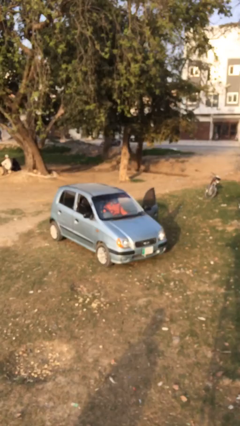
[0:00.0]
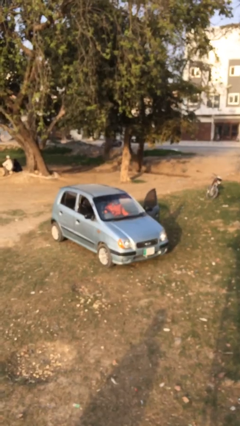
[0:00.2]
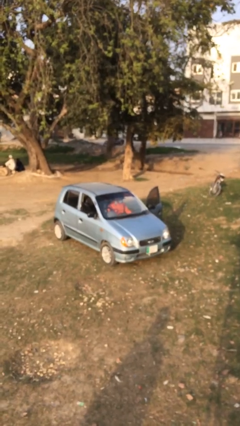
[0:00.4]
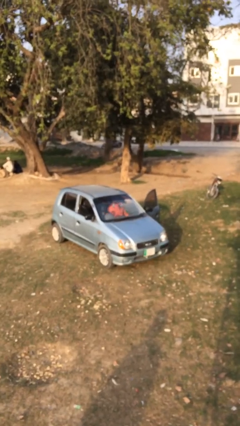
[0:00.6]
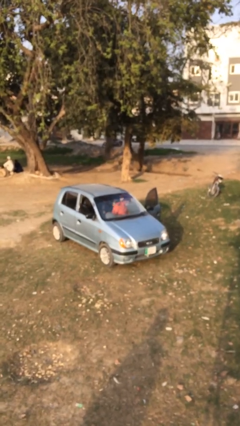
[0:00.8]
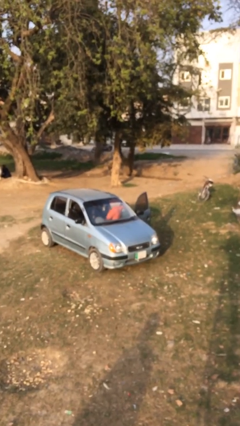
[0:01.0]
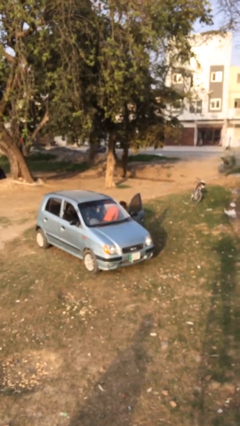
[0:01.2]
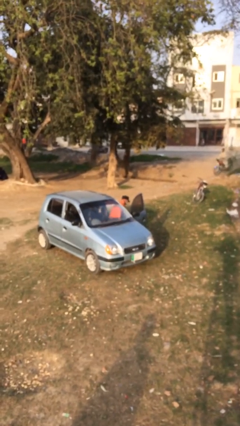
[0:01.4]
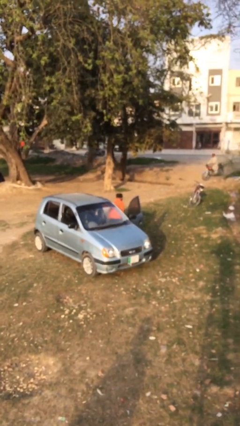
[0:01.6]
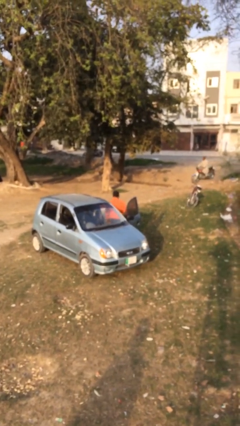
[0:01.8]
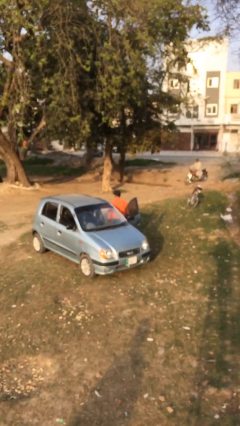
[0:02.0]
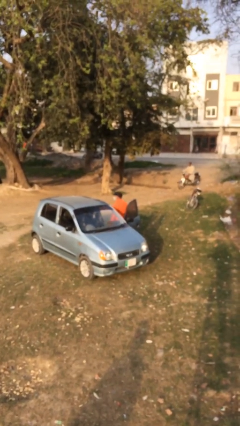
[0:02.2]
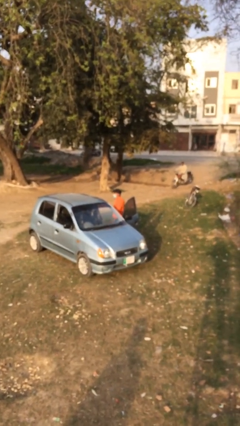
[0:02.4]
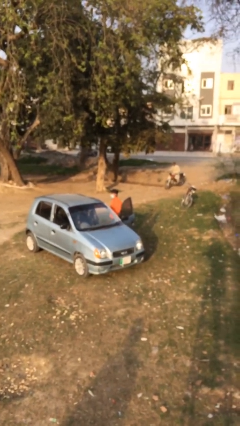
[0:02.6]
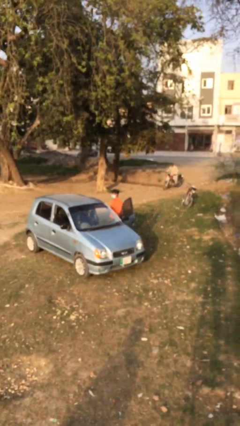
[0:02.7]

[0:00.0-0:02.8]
person exits car

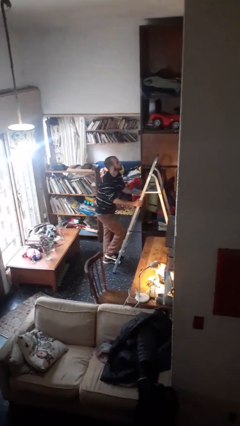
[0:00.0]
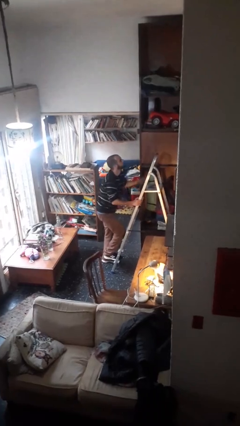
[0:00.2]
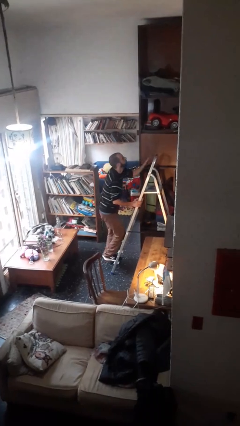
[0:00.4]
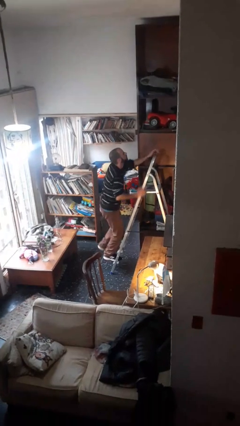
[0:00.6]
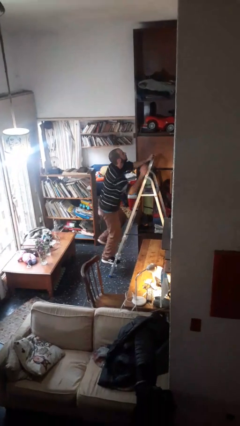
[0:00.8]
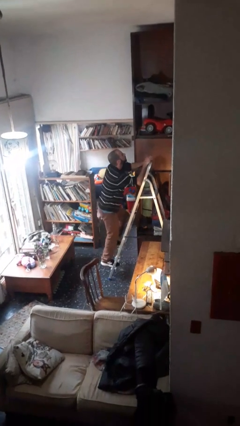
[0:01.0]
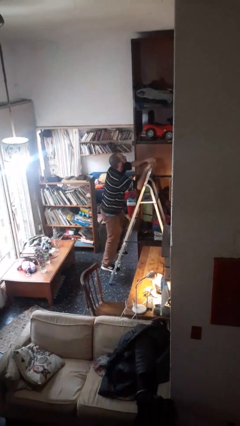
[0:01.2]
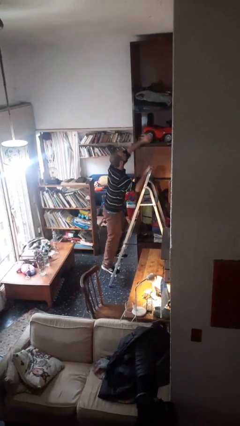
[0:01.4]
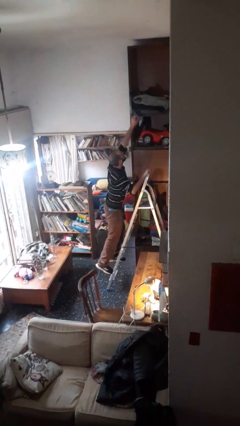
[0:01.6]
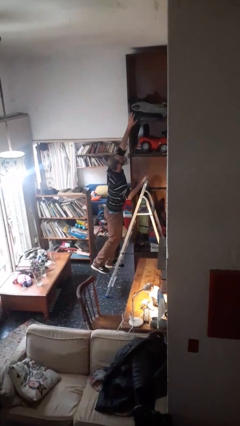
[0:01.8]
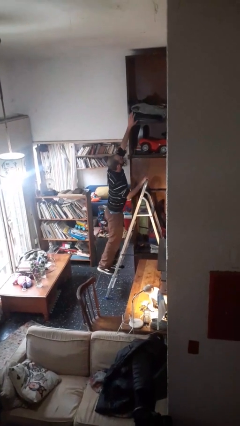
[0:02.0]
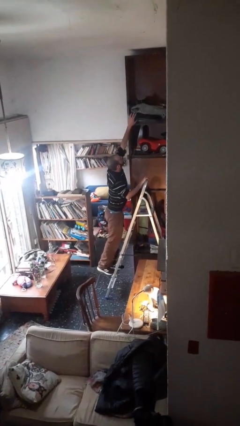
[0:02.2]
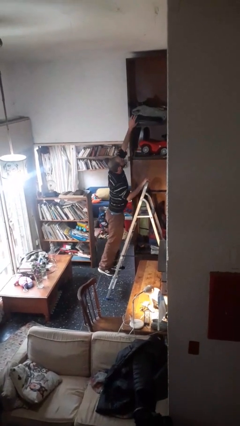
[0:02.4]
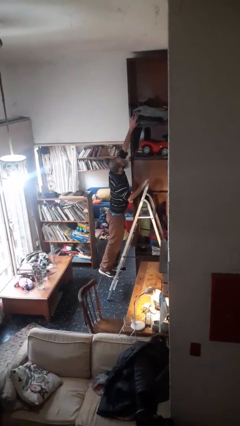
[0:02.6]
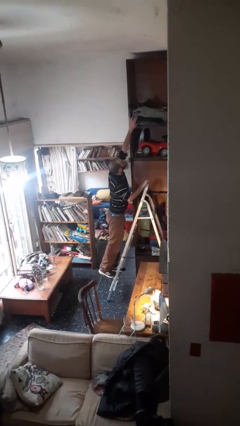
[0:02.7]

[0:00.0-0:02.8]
person climbs up ladder

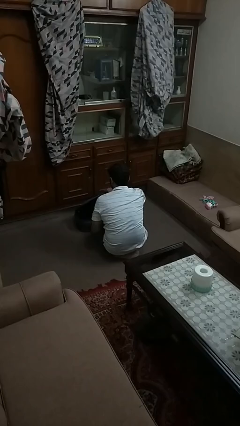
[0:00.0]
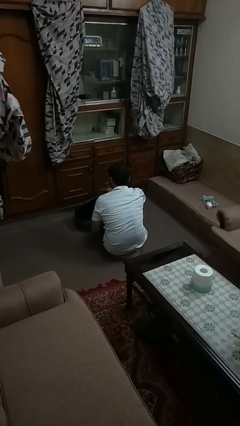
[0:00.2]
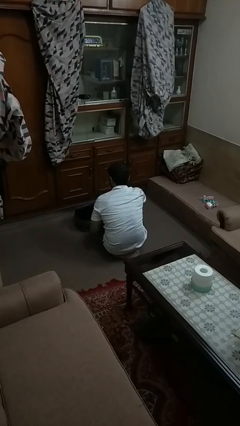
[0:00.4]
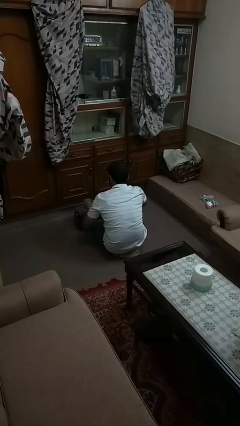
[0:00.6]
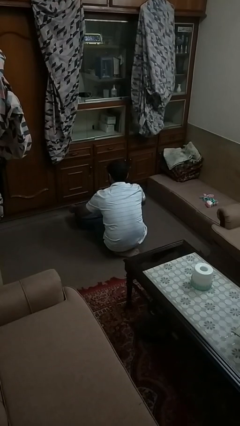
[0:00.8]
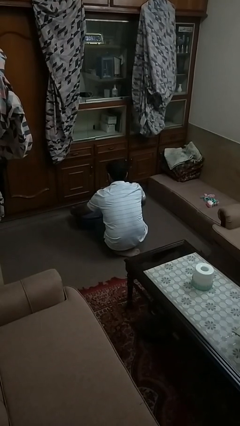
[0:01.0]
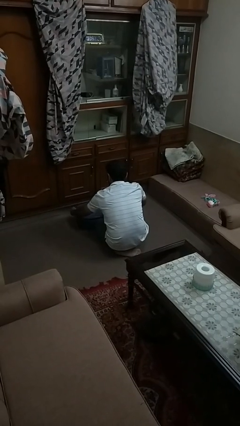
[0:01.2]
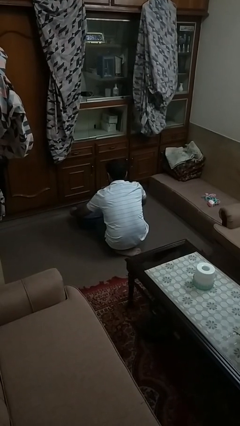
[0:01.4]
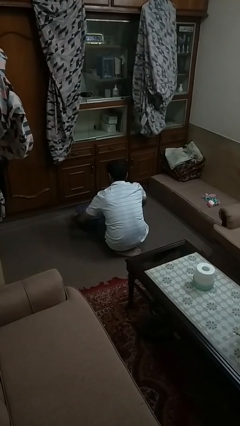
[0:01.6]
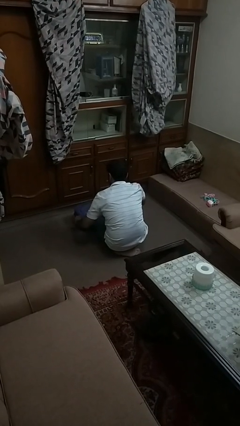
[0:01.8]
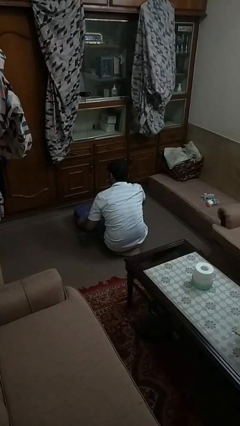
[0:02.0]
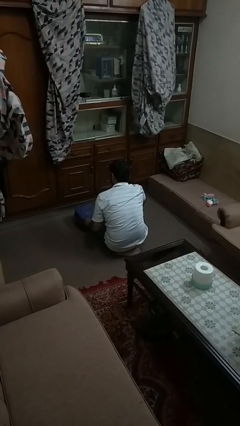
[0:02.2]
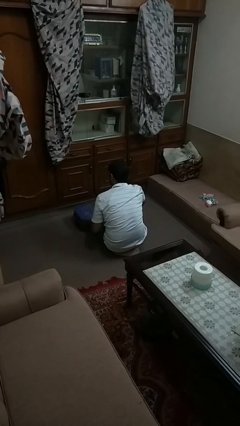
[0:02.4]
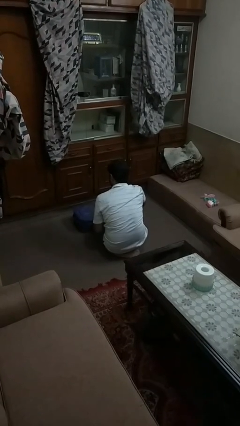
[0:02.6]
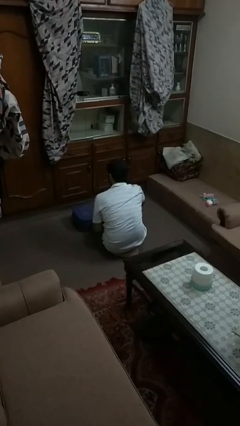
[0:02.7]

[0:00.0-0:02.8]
person closes suitcase

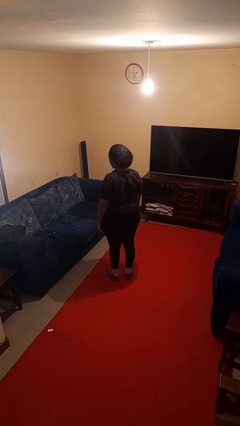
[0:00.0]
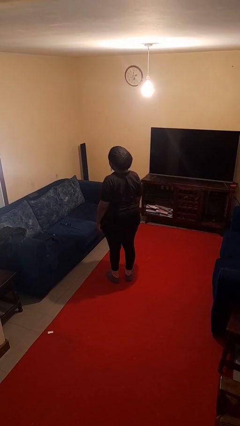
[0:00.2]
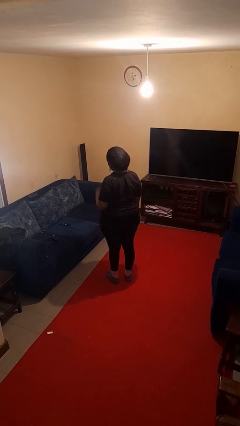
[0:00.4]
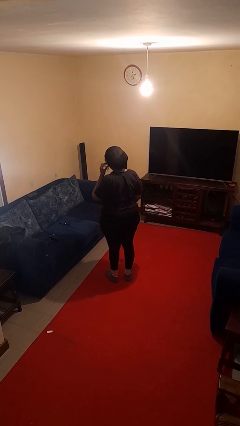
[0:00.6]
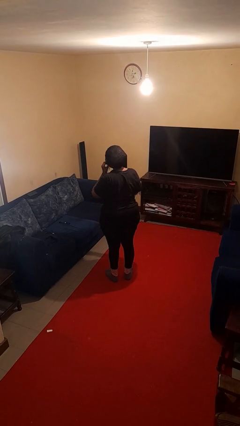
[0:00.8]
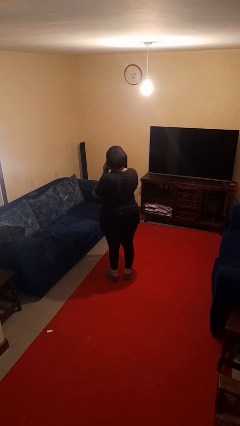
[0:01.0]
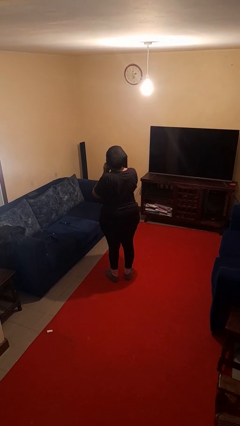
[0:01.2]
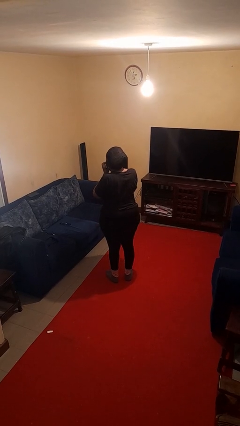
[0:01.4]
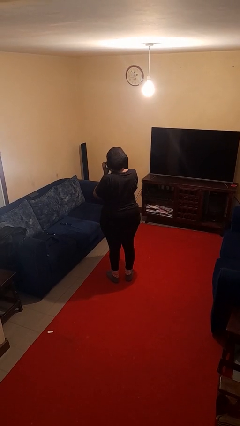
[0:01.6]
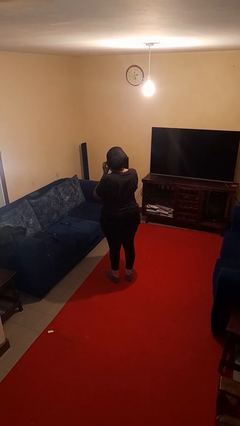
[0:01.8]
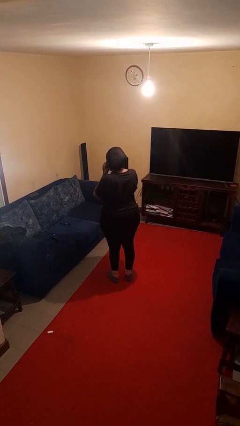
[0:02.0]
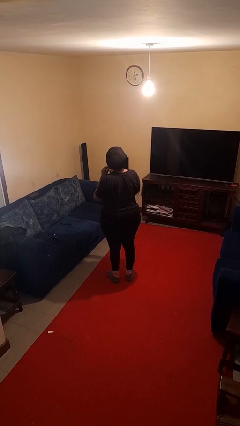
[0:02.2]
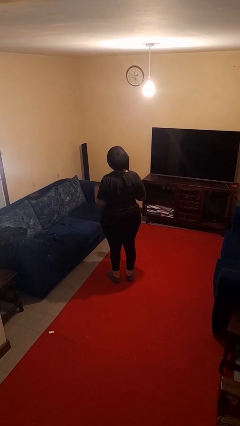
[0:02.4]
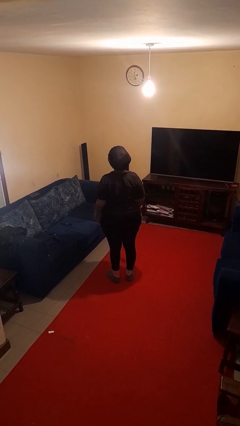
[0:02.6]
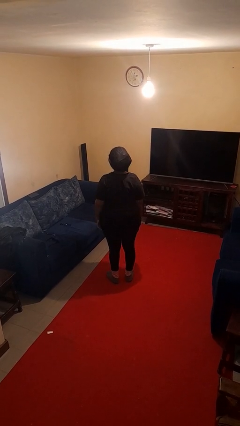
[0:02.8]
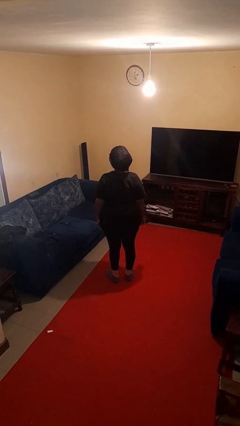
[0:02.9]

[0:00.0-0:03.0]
person takes off earrings

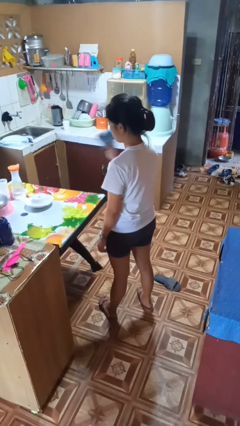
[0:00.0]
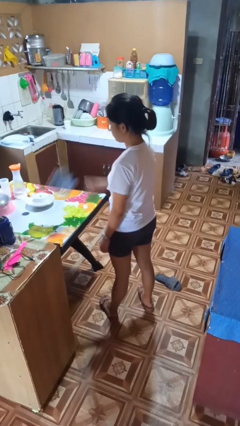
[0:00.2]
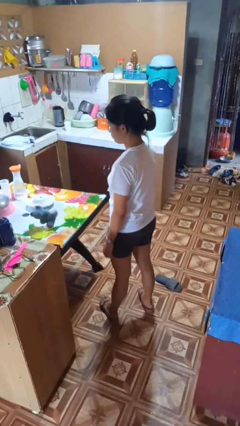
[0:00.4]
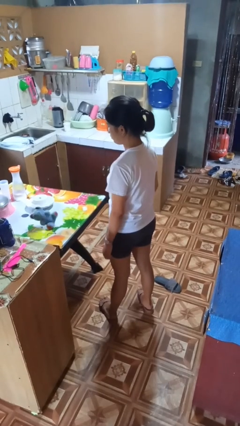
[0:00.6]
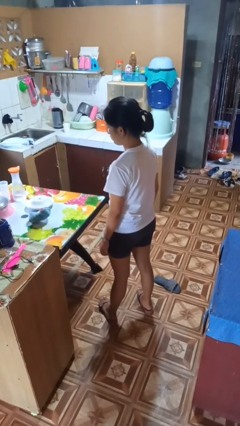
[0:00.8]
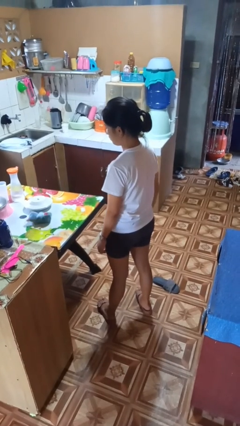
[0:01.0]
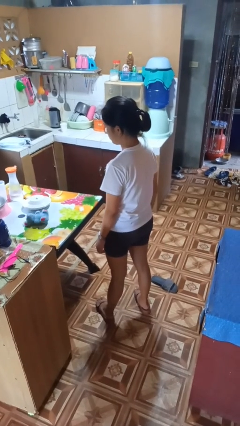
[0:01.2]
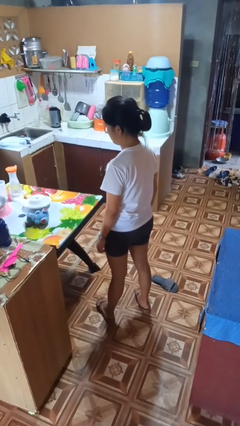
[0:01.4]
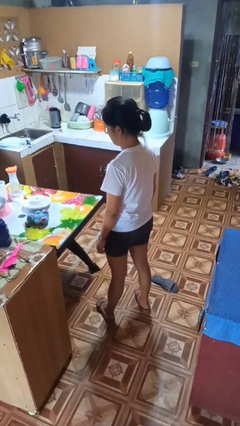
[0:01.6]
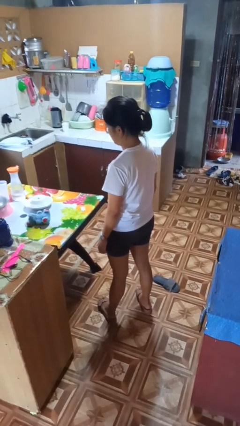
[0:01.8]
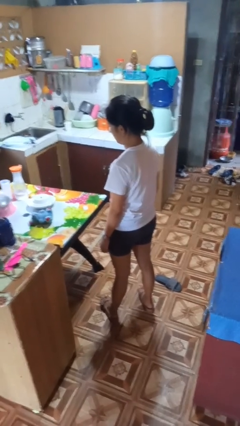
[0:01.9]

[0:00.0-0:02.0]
person throws object on table

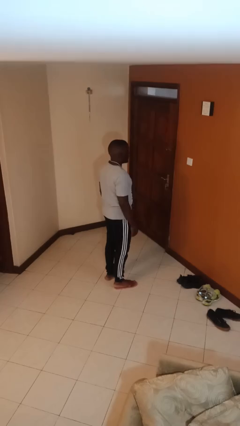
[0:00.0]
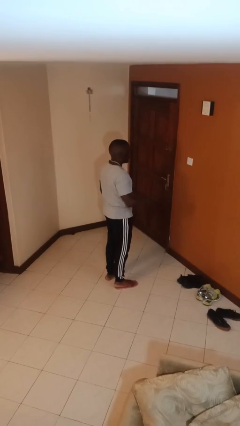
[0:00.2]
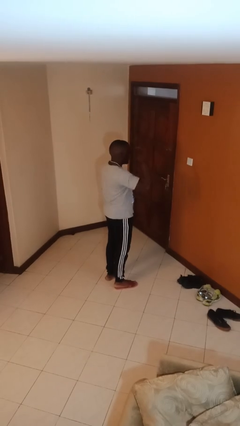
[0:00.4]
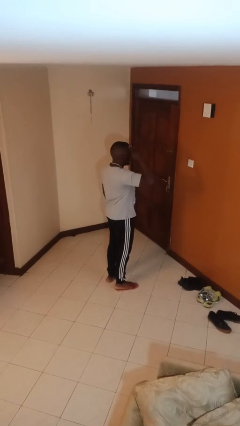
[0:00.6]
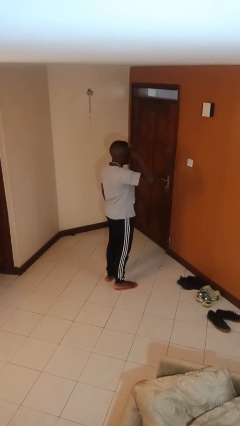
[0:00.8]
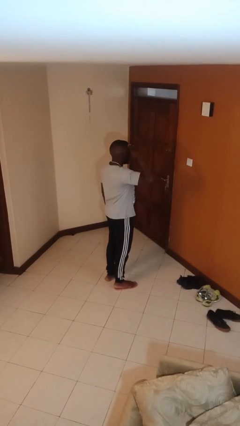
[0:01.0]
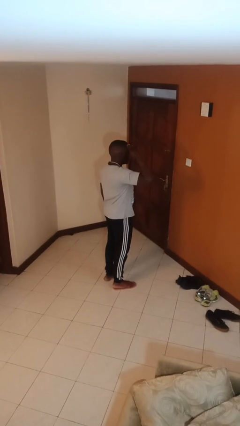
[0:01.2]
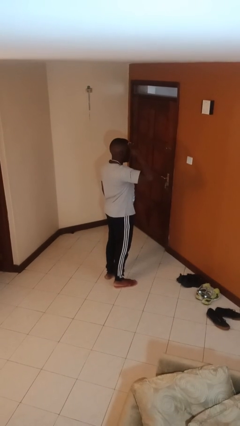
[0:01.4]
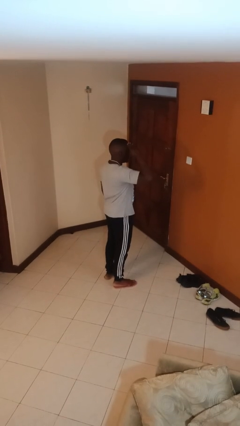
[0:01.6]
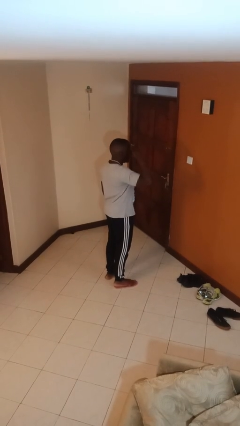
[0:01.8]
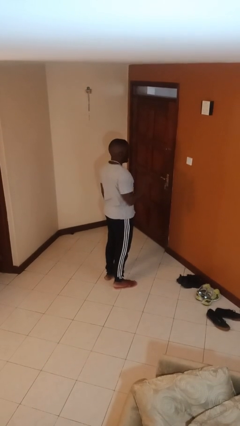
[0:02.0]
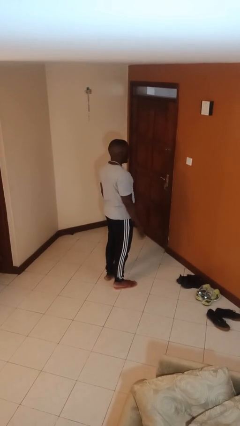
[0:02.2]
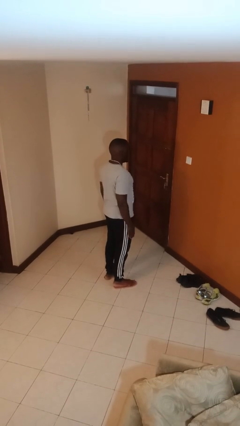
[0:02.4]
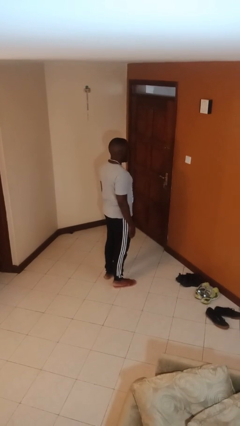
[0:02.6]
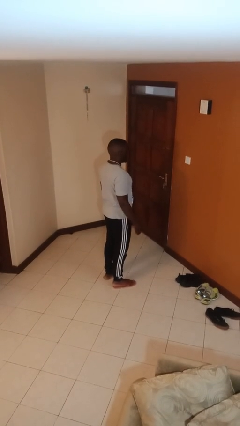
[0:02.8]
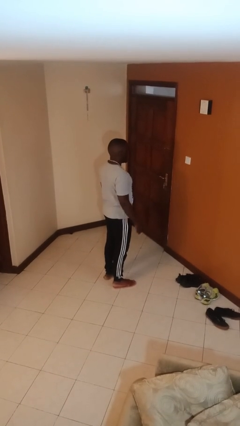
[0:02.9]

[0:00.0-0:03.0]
person salutes

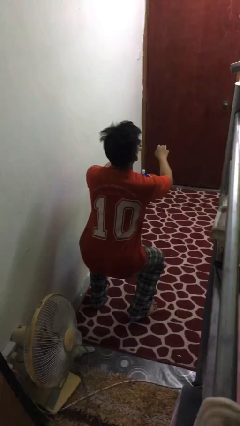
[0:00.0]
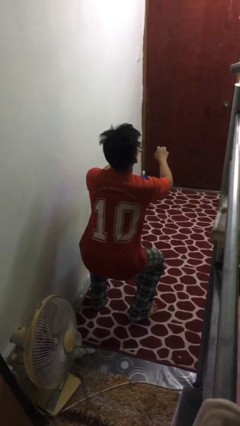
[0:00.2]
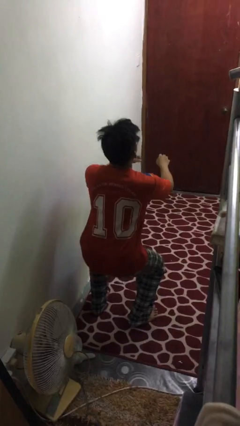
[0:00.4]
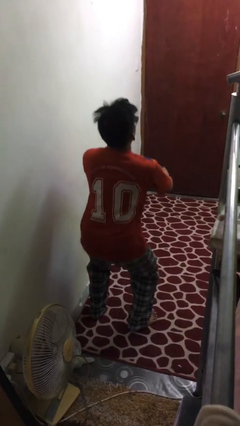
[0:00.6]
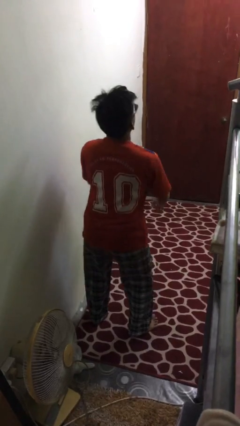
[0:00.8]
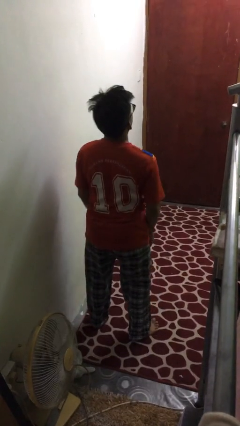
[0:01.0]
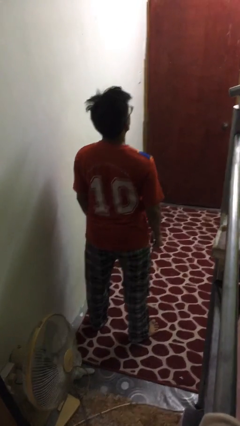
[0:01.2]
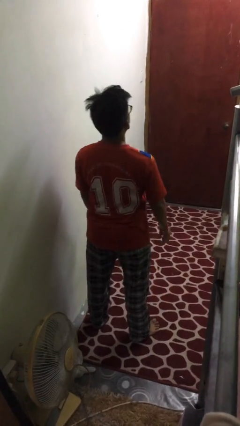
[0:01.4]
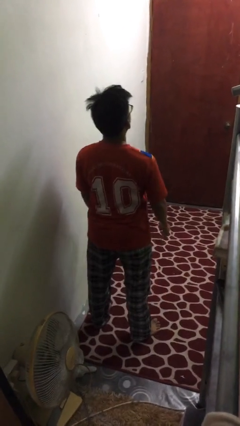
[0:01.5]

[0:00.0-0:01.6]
person stands up
